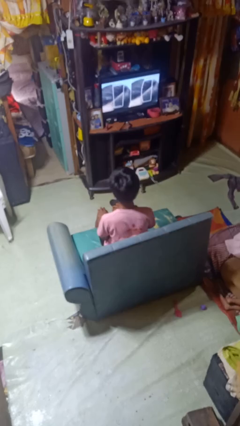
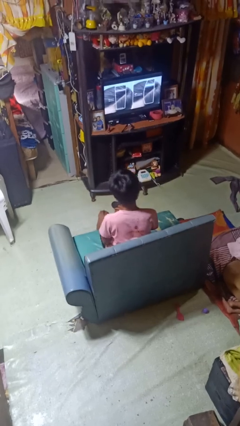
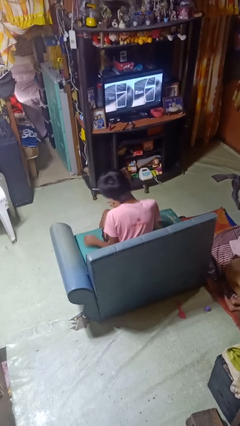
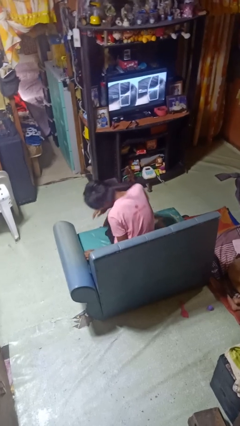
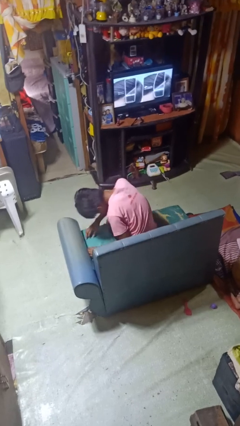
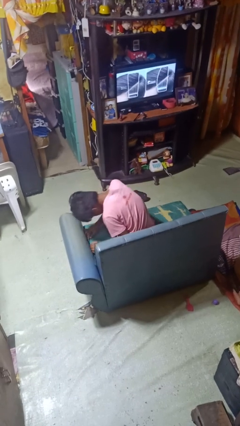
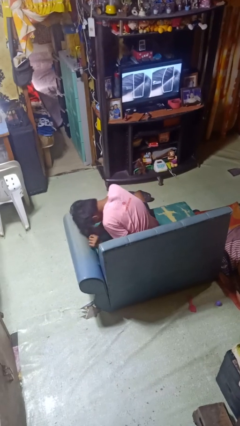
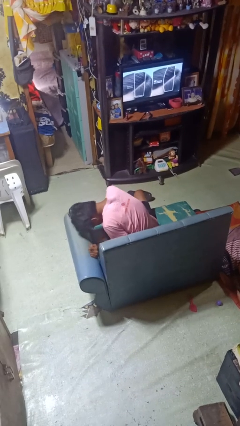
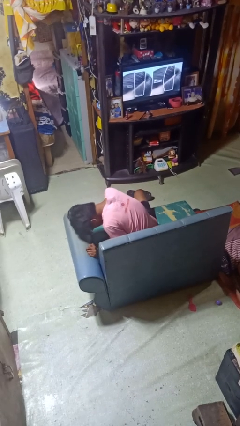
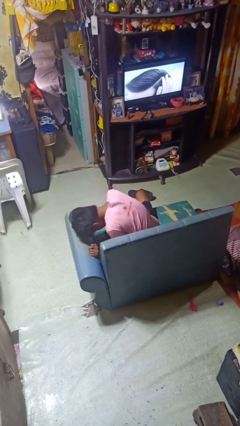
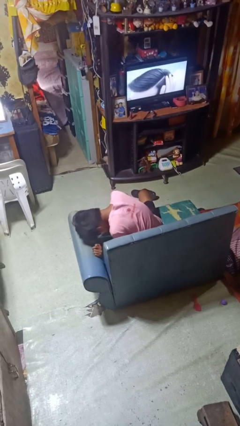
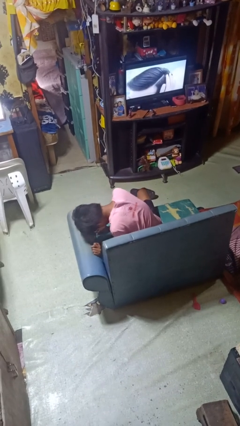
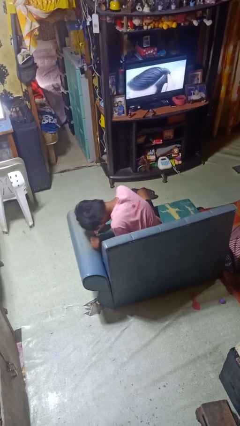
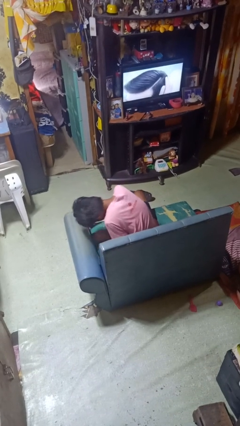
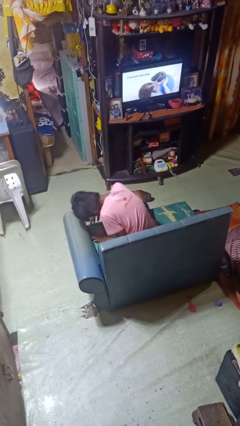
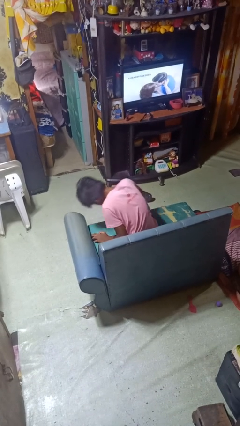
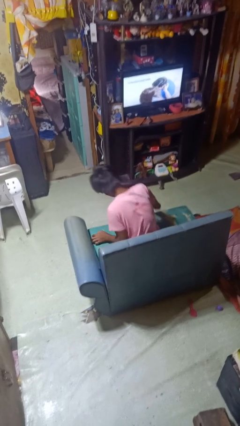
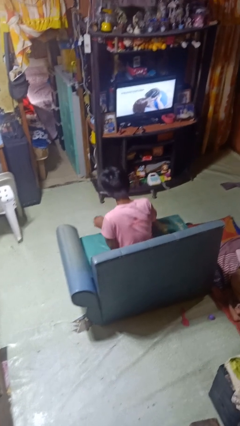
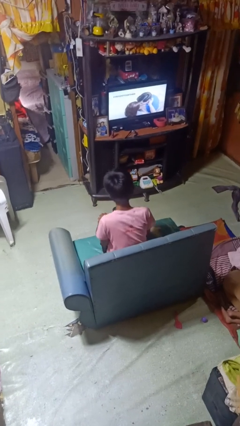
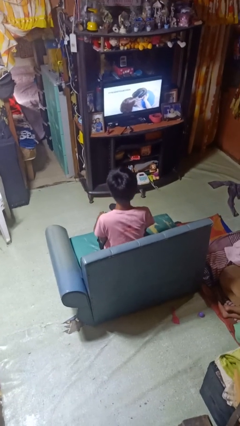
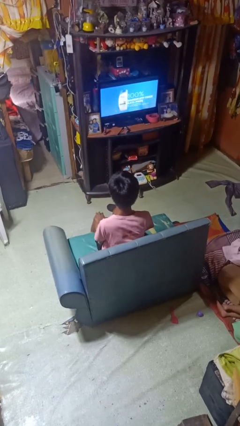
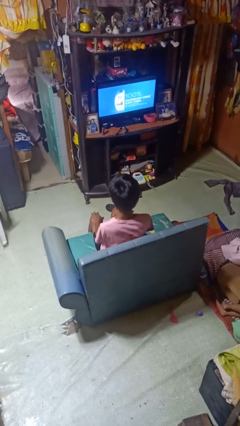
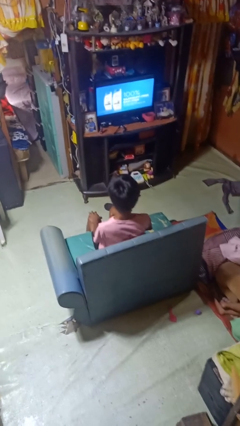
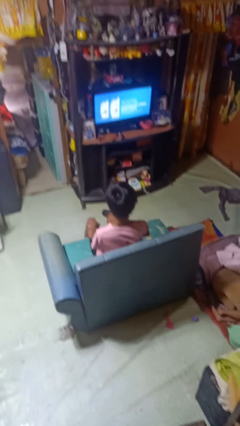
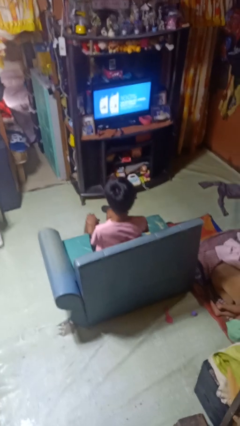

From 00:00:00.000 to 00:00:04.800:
person searches in couch

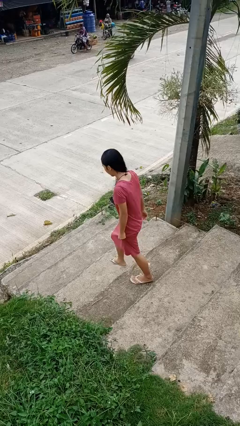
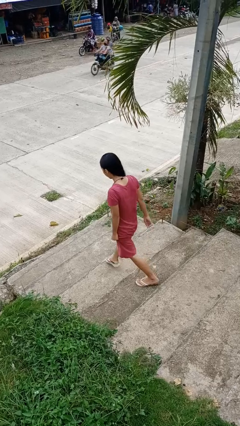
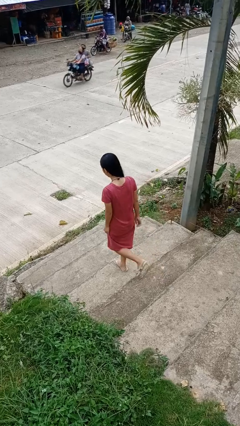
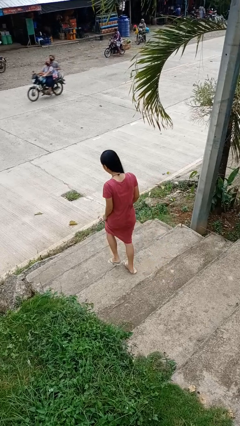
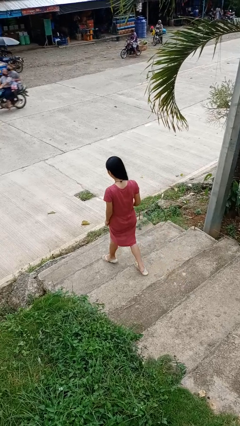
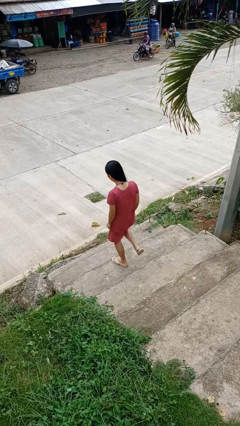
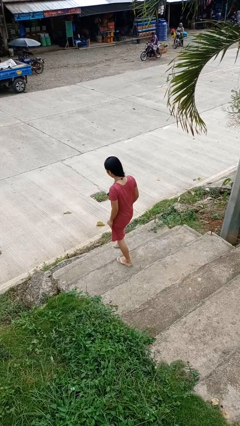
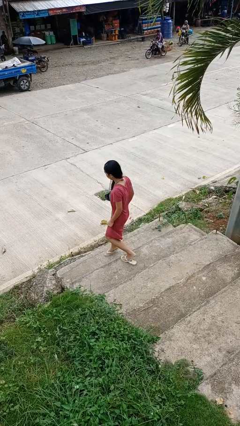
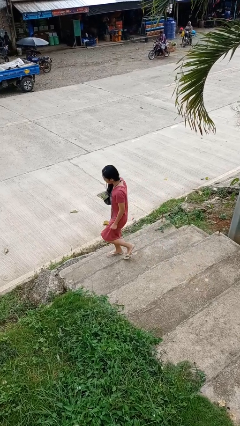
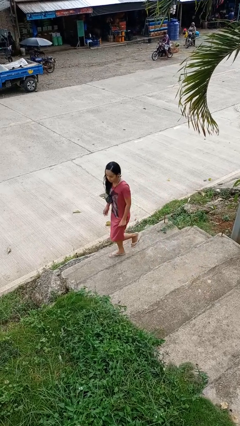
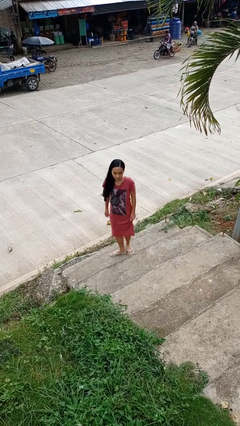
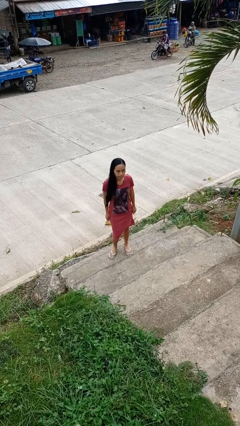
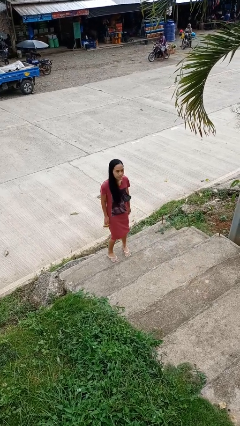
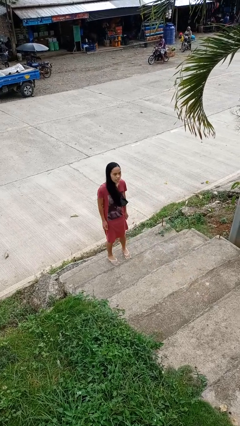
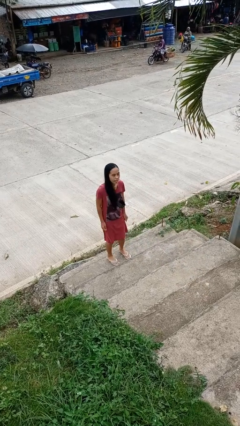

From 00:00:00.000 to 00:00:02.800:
person climbs down stairs

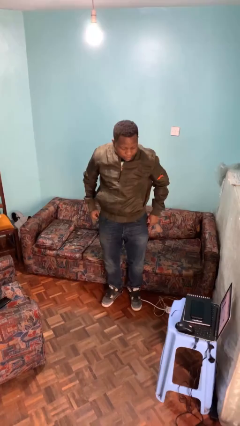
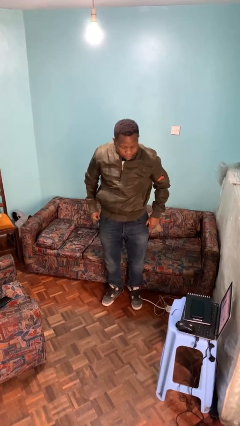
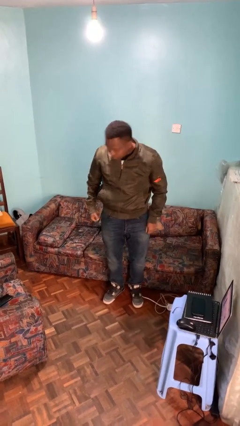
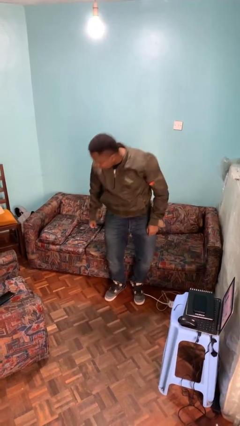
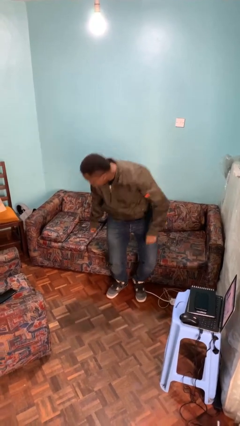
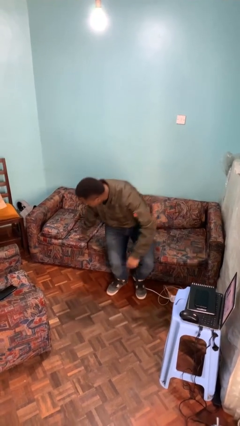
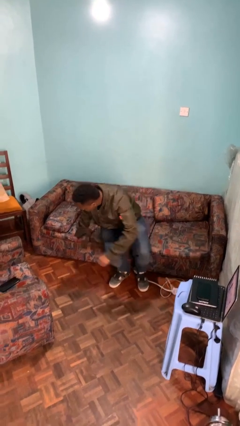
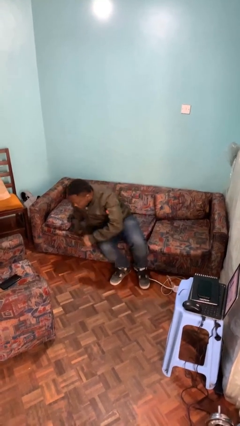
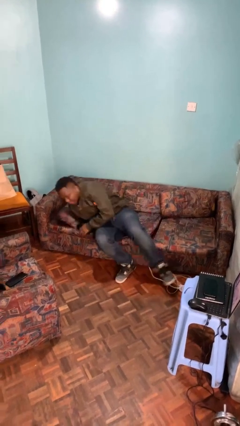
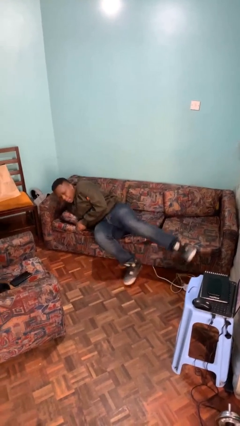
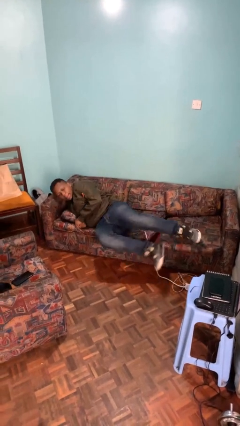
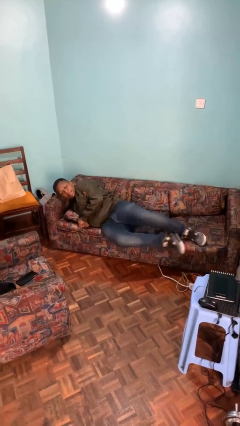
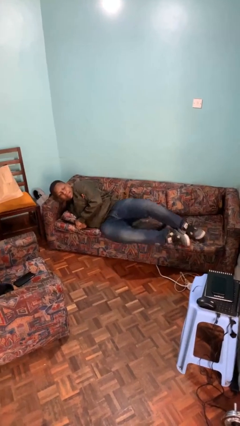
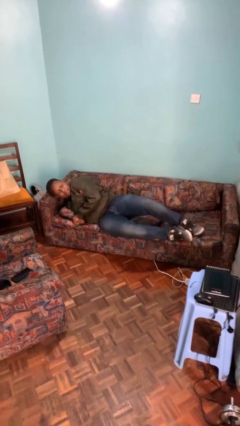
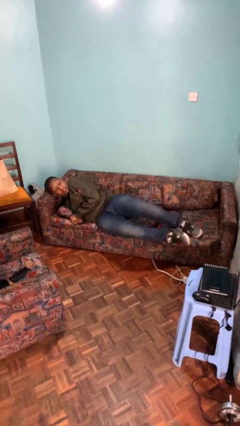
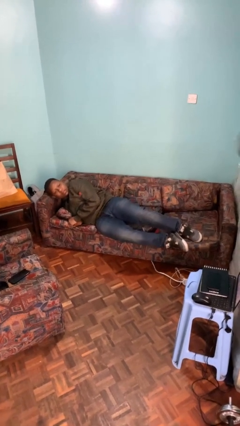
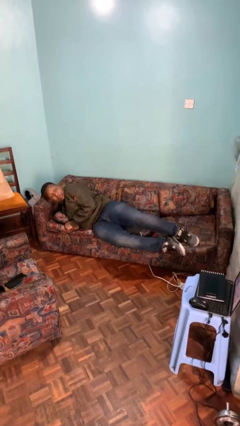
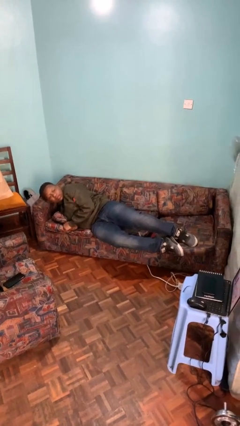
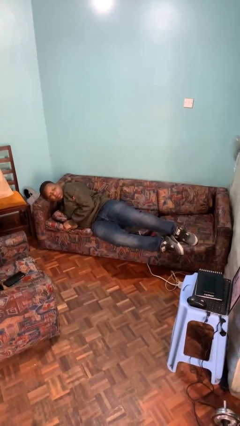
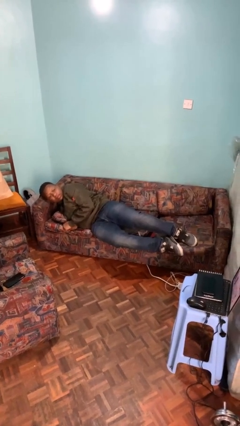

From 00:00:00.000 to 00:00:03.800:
person lies down on couch

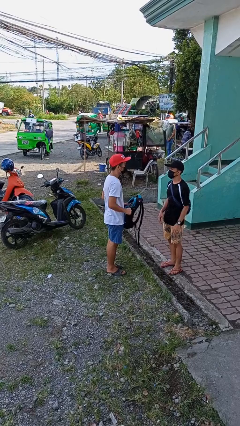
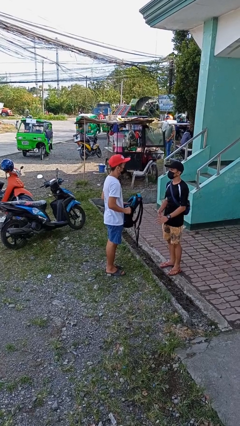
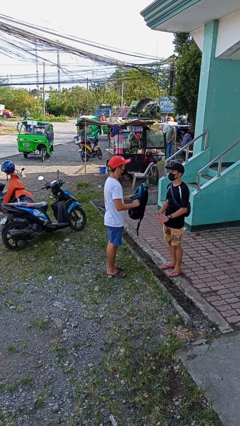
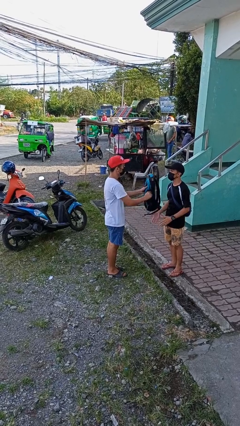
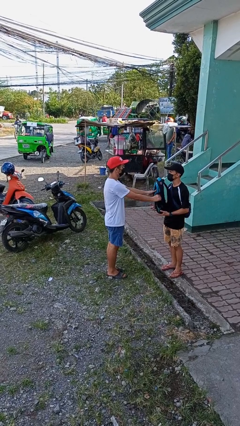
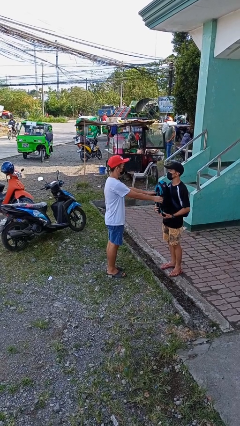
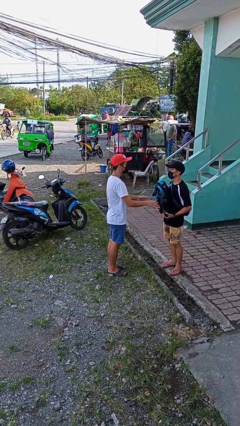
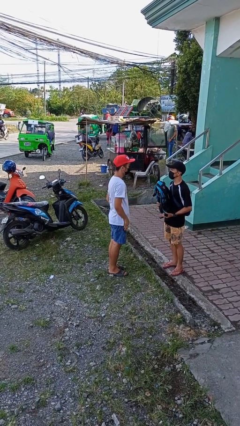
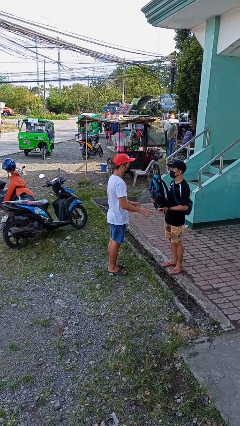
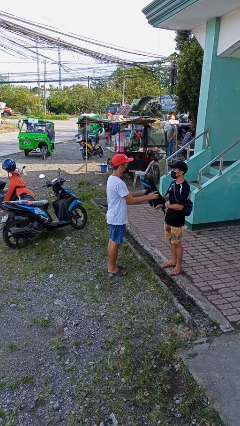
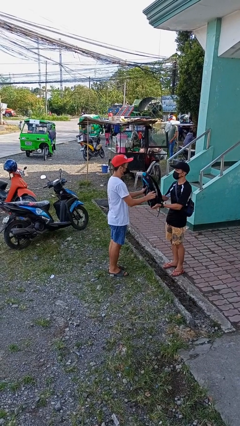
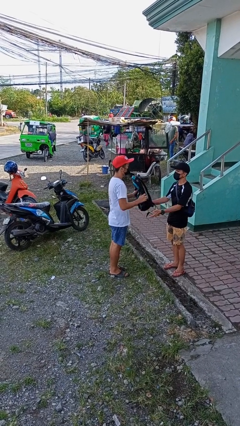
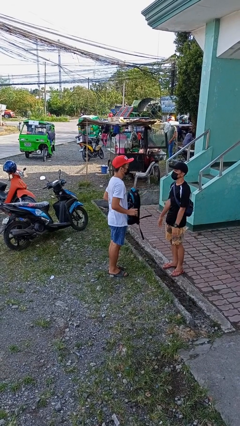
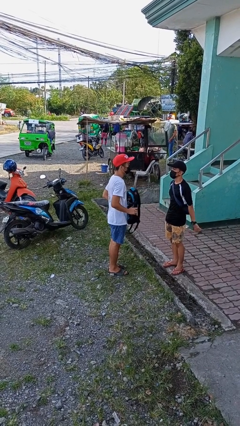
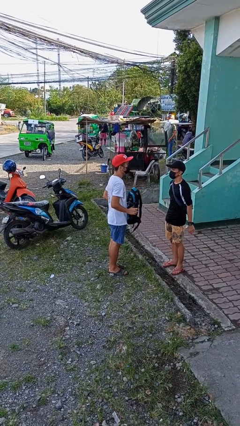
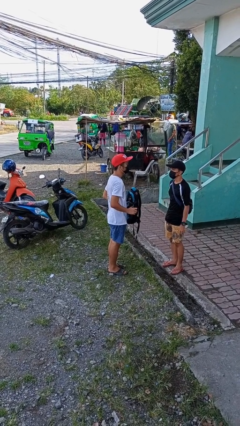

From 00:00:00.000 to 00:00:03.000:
person transfers object to person

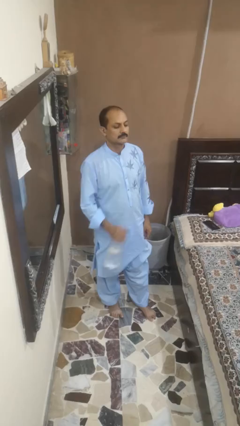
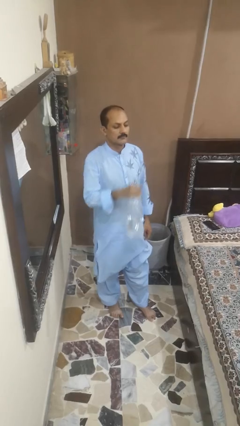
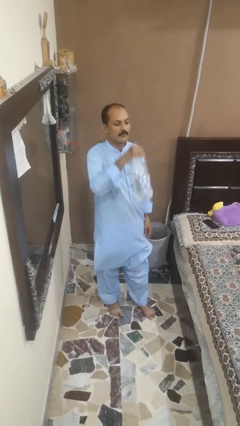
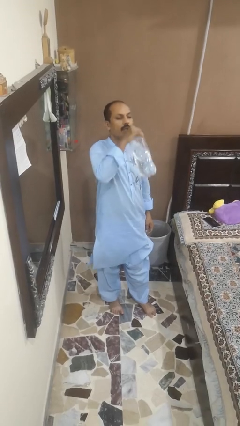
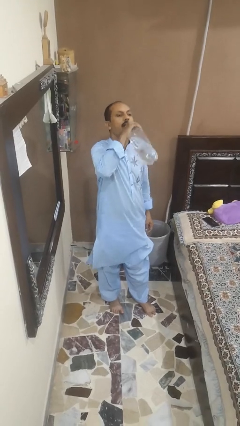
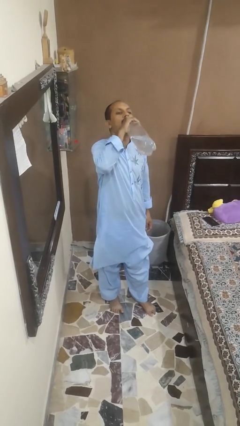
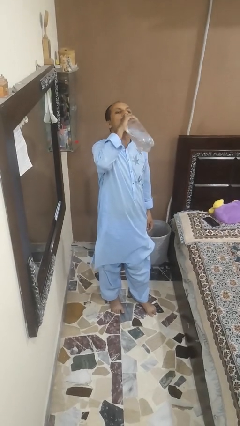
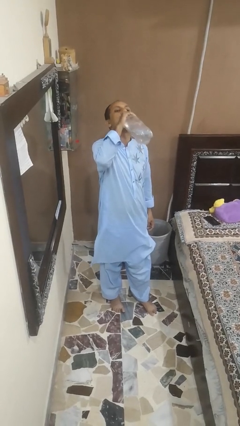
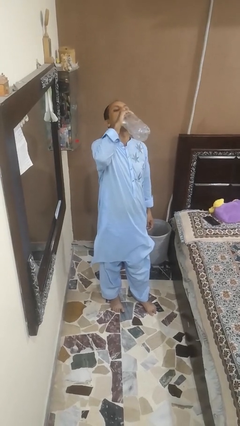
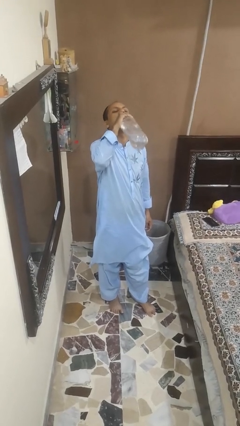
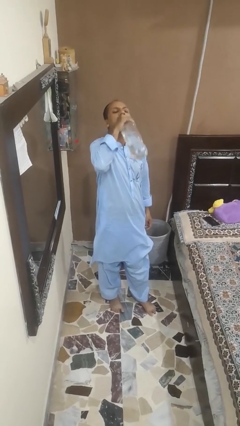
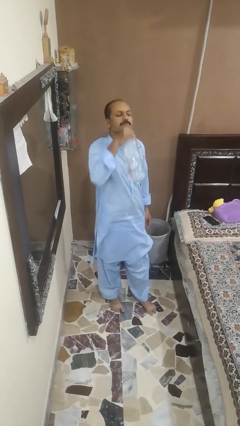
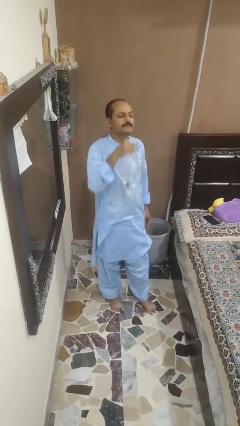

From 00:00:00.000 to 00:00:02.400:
person drinks from bottle

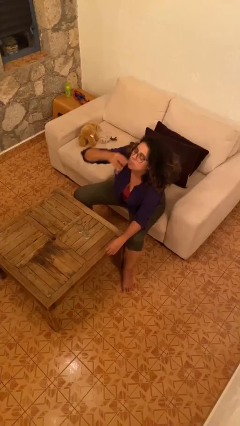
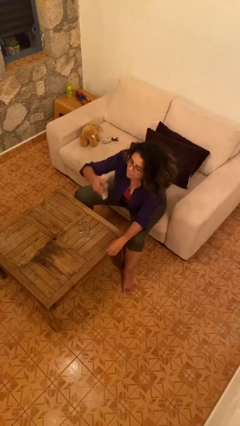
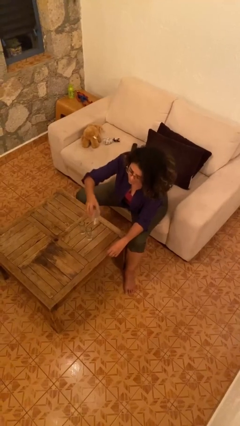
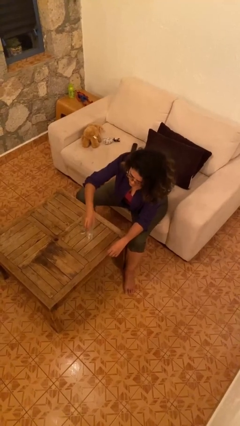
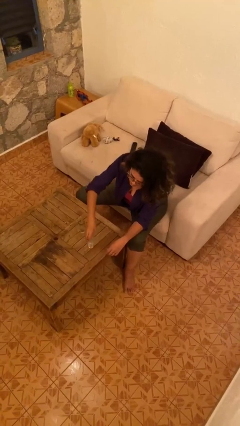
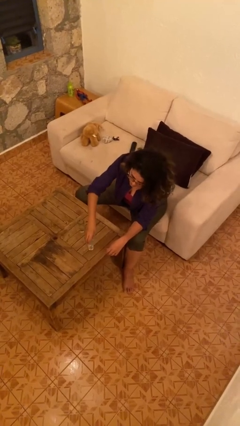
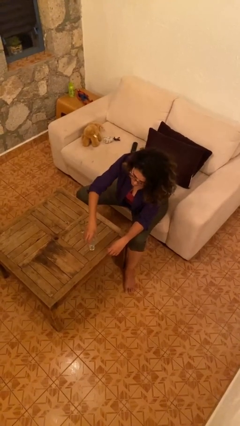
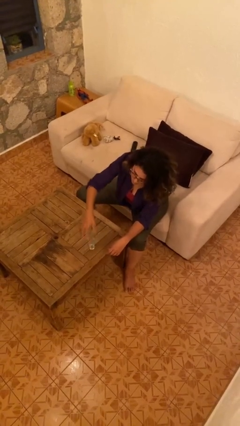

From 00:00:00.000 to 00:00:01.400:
person puts down object on table
